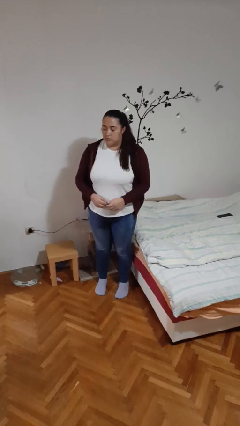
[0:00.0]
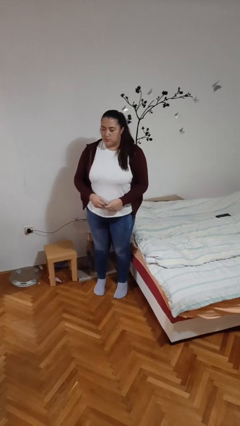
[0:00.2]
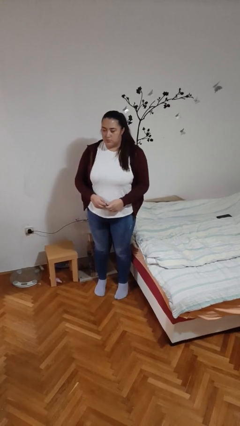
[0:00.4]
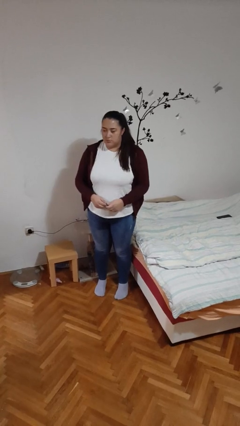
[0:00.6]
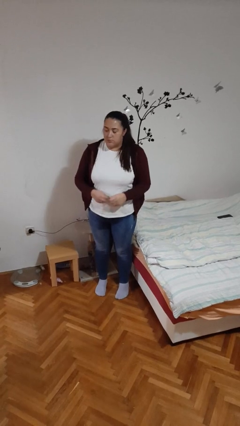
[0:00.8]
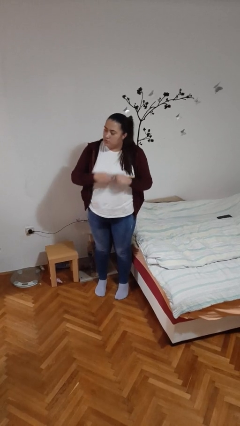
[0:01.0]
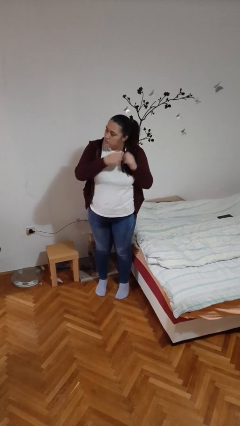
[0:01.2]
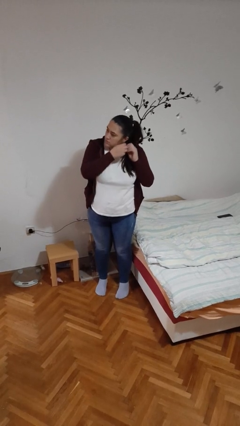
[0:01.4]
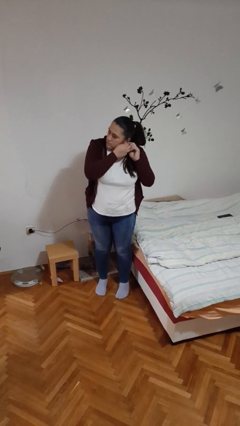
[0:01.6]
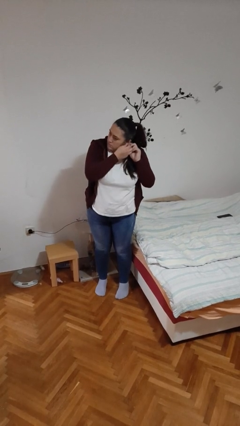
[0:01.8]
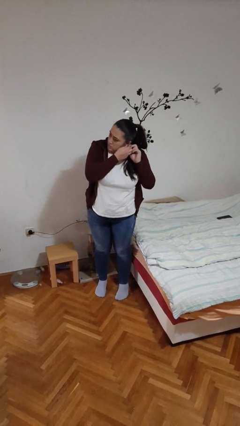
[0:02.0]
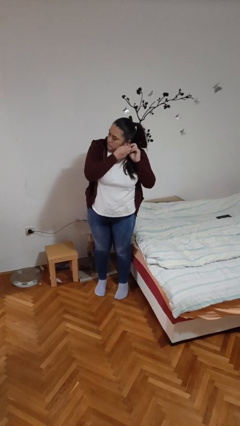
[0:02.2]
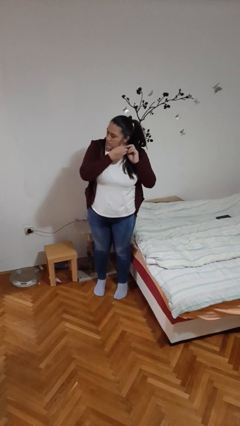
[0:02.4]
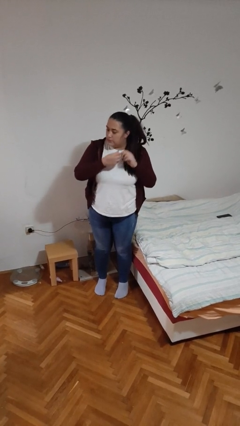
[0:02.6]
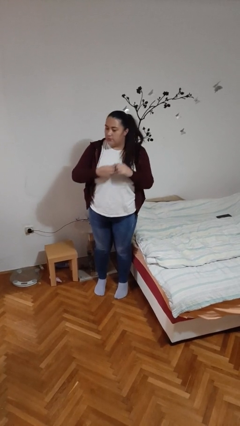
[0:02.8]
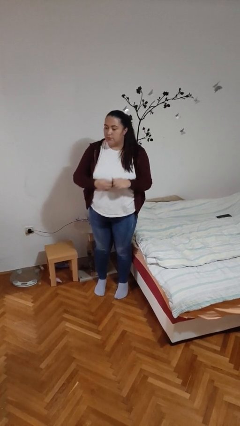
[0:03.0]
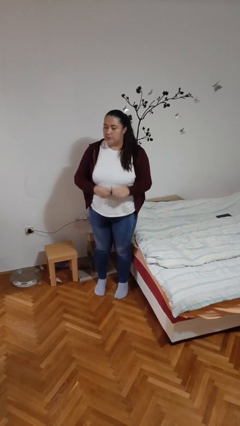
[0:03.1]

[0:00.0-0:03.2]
person takes off earrings

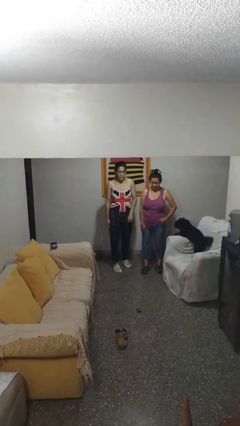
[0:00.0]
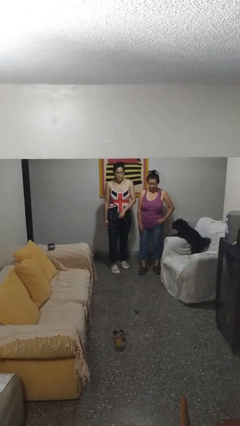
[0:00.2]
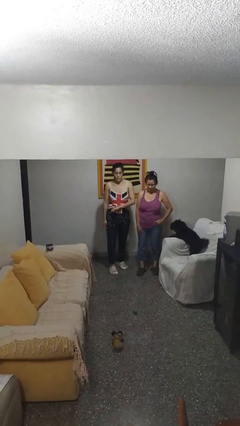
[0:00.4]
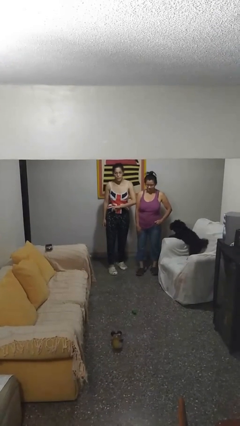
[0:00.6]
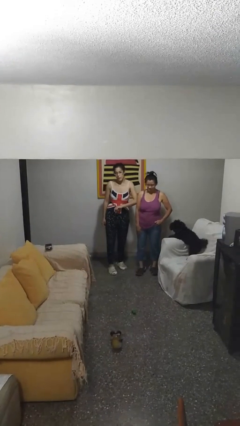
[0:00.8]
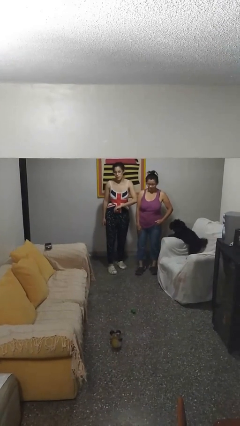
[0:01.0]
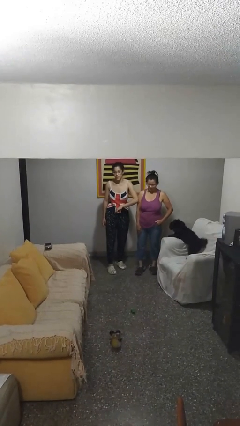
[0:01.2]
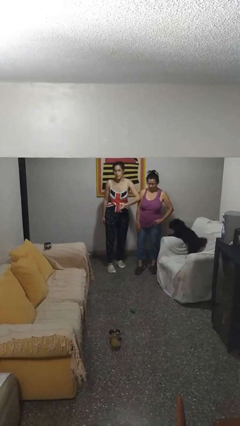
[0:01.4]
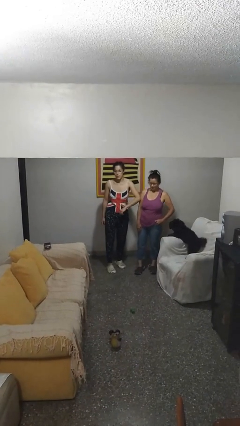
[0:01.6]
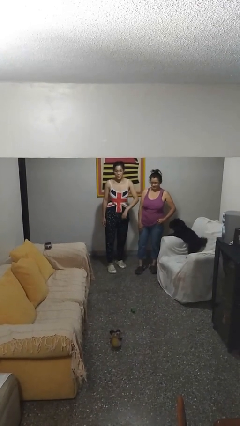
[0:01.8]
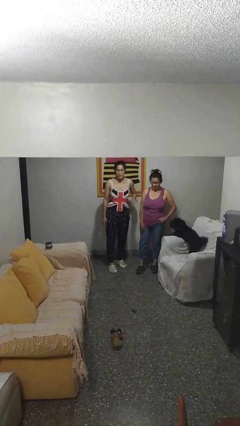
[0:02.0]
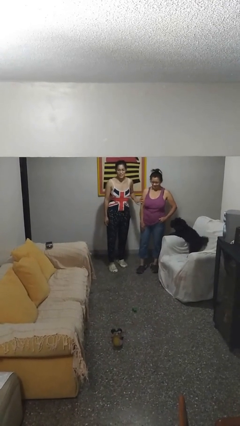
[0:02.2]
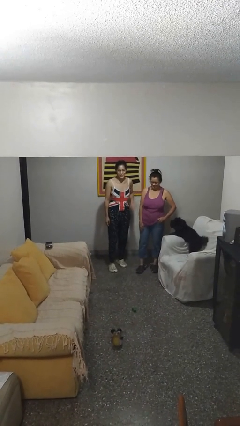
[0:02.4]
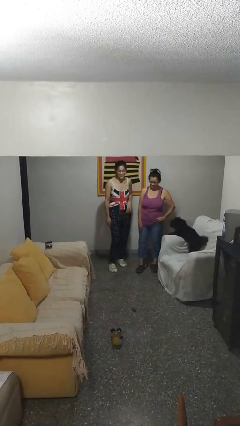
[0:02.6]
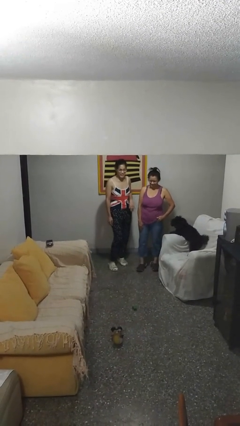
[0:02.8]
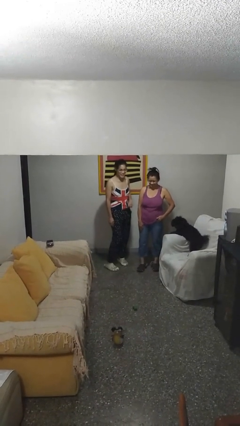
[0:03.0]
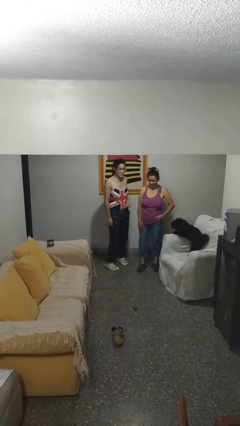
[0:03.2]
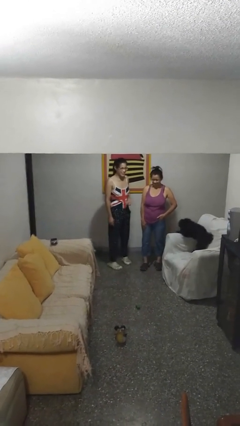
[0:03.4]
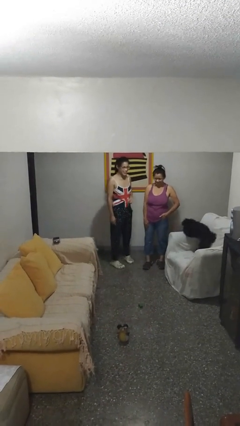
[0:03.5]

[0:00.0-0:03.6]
person nudges person with elbow

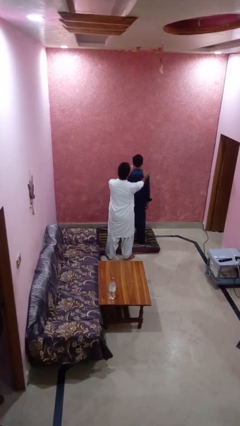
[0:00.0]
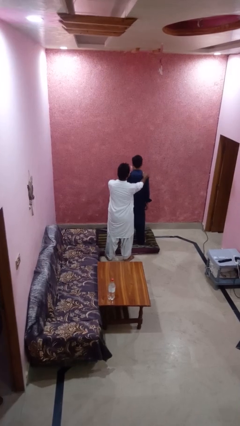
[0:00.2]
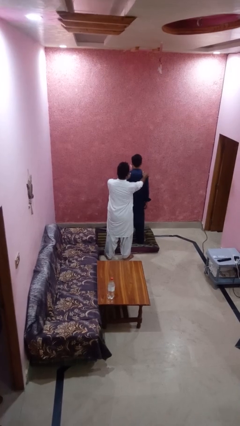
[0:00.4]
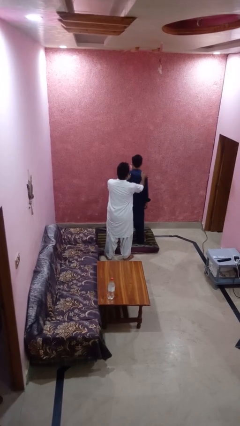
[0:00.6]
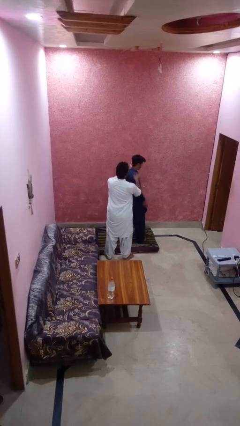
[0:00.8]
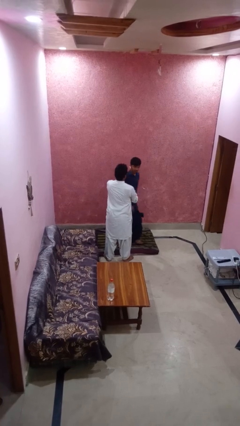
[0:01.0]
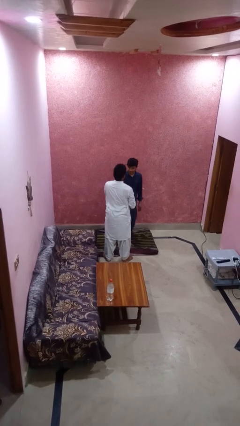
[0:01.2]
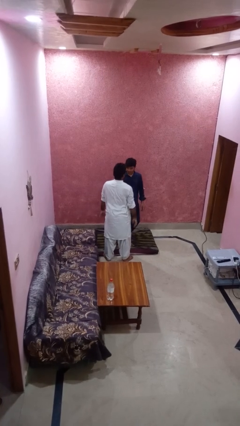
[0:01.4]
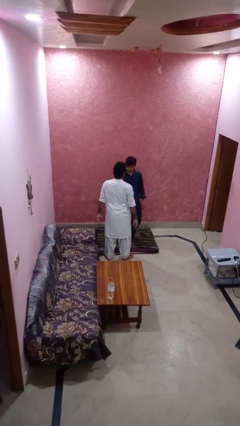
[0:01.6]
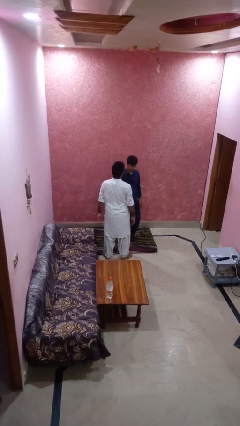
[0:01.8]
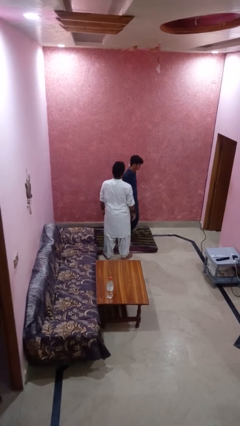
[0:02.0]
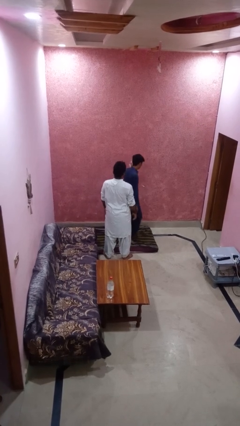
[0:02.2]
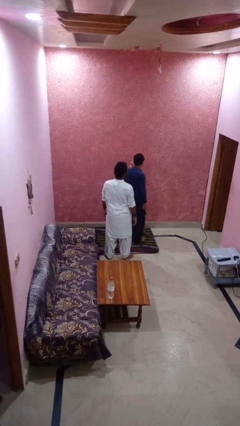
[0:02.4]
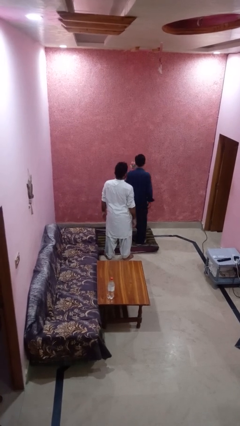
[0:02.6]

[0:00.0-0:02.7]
person spins person around

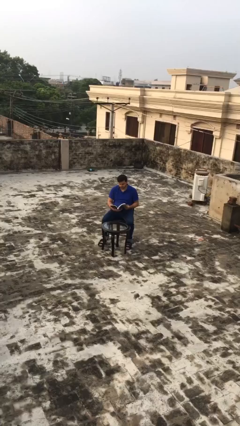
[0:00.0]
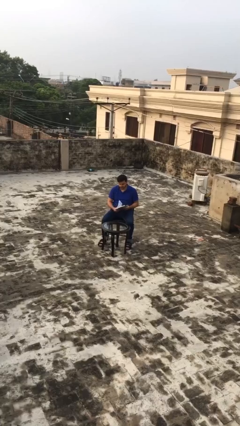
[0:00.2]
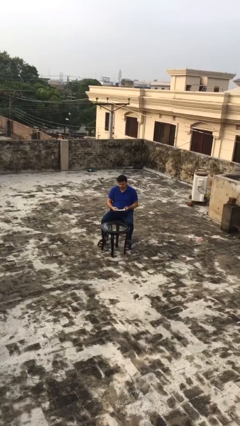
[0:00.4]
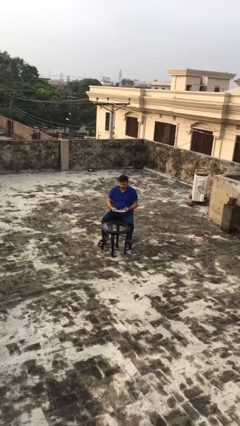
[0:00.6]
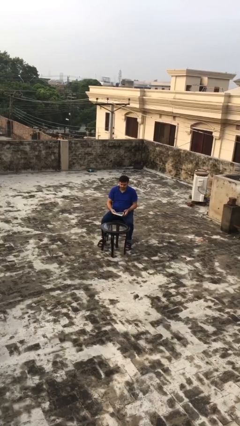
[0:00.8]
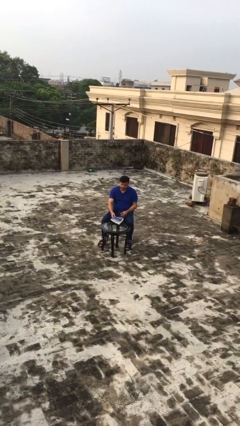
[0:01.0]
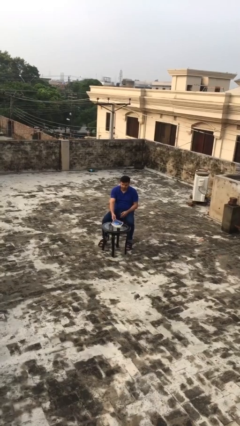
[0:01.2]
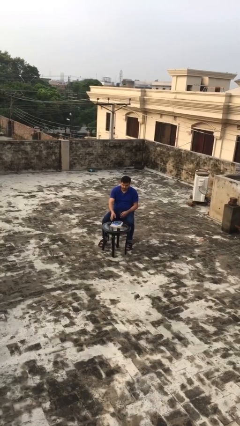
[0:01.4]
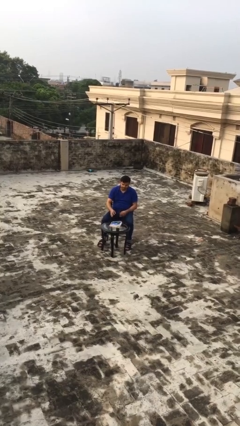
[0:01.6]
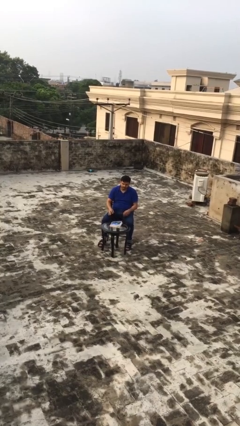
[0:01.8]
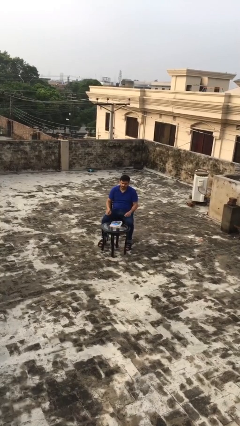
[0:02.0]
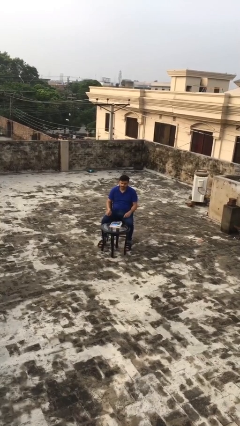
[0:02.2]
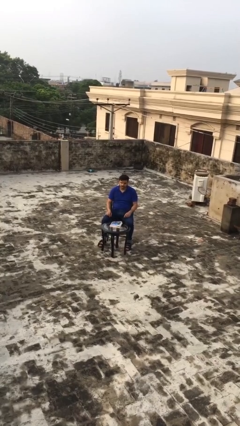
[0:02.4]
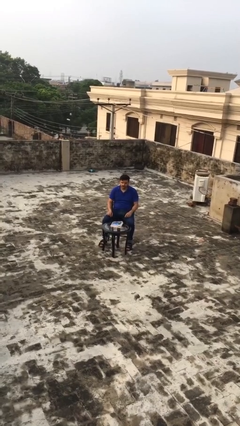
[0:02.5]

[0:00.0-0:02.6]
person puts down object on table

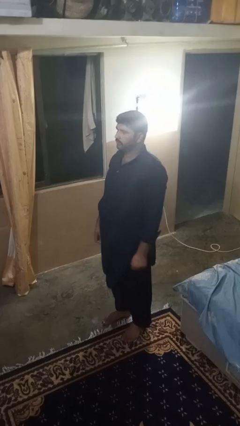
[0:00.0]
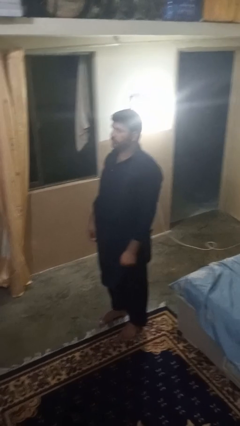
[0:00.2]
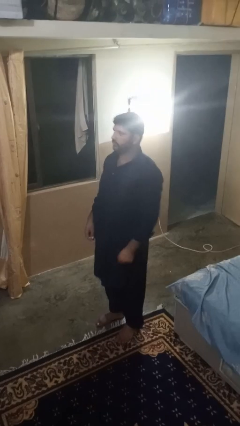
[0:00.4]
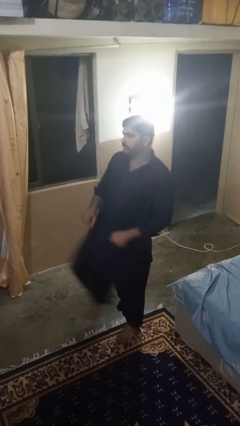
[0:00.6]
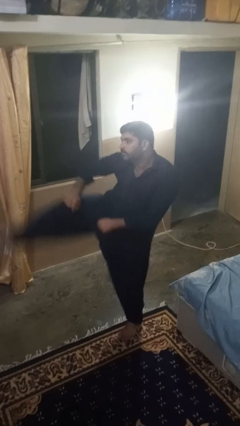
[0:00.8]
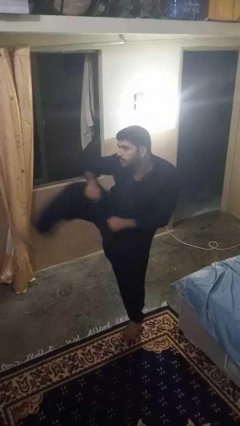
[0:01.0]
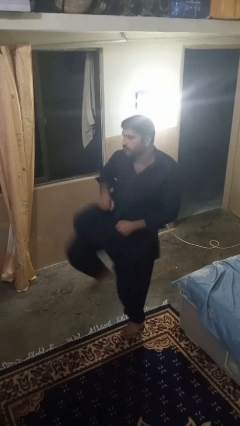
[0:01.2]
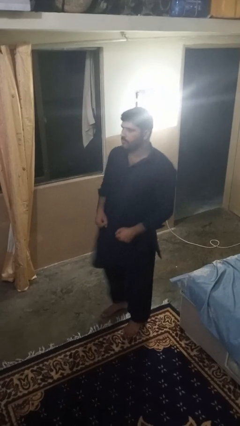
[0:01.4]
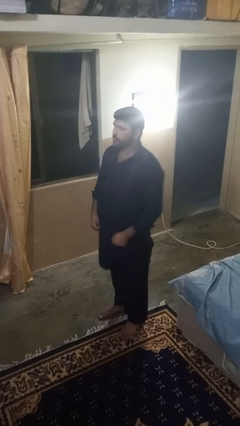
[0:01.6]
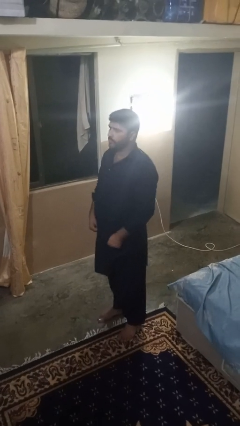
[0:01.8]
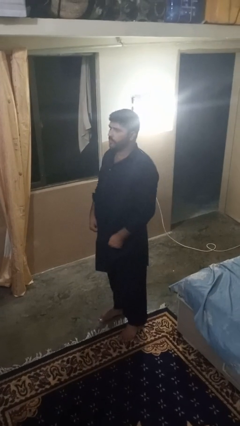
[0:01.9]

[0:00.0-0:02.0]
person karate kicks

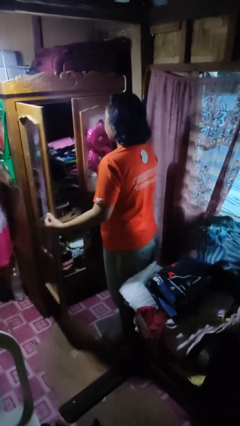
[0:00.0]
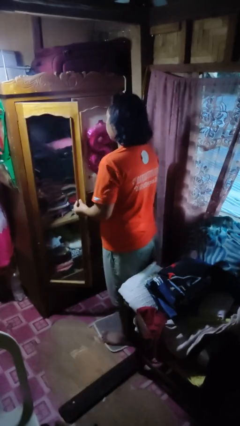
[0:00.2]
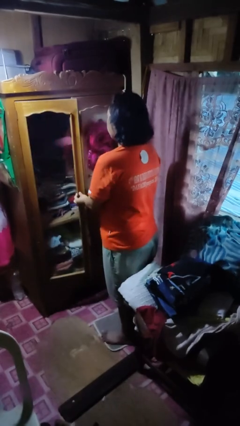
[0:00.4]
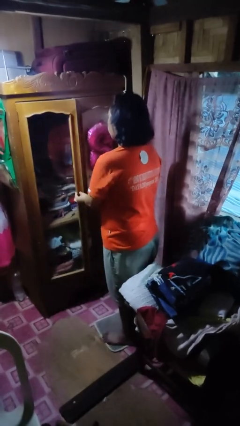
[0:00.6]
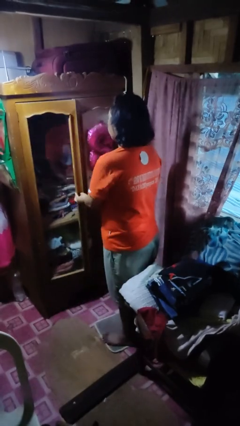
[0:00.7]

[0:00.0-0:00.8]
person closes closet door

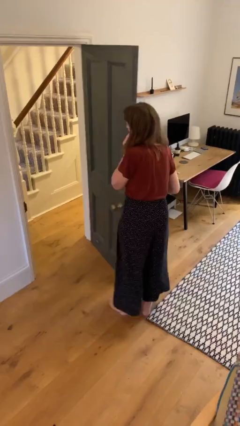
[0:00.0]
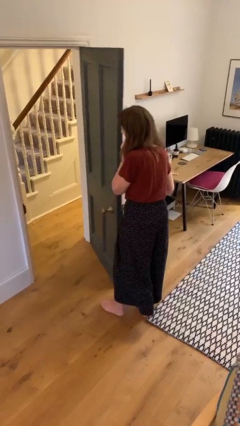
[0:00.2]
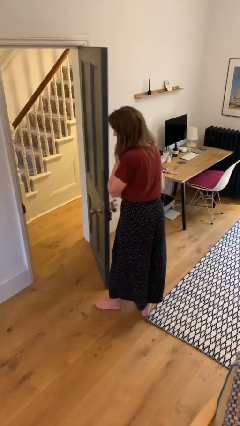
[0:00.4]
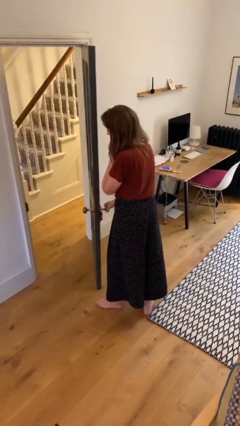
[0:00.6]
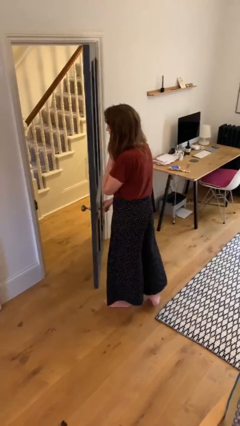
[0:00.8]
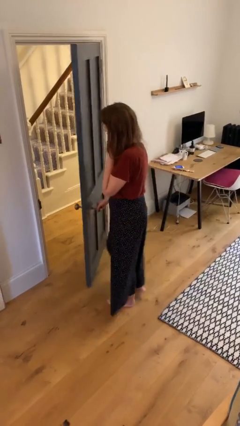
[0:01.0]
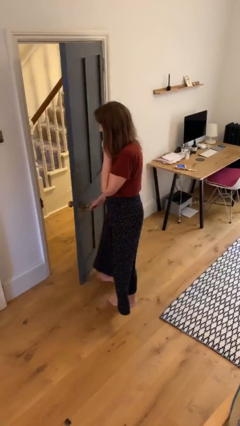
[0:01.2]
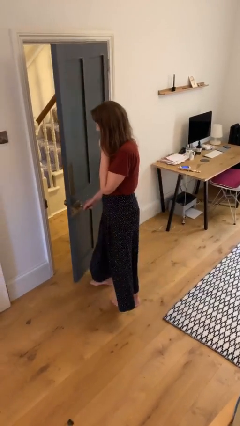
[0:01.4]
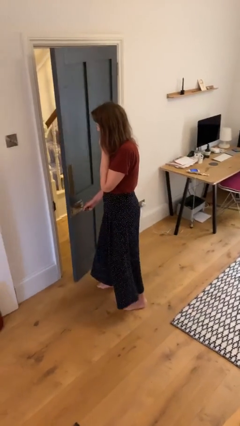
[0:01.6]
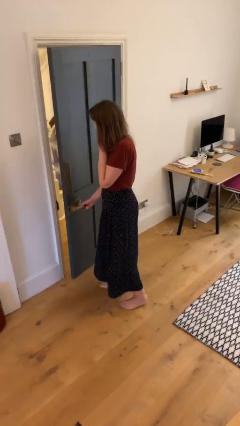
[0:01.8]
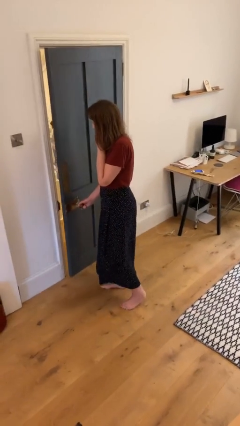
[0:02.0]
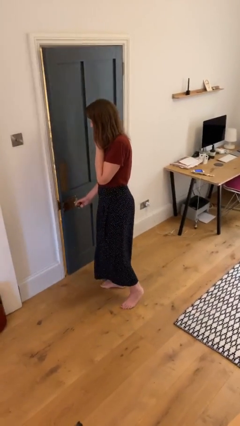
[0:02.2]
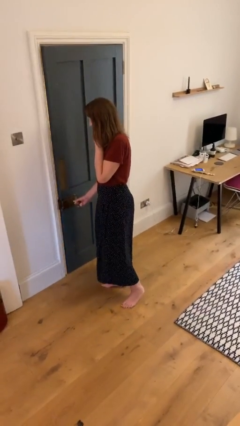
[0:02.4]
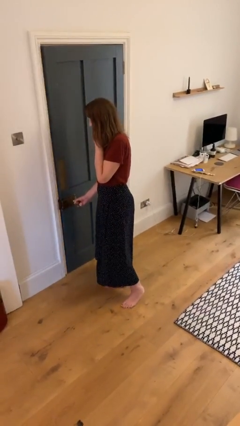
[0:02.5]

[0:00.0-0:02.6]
person closes facility door
